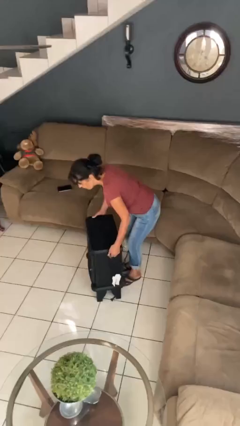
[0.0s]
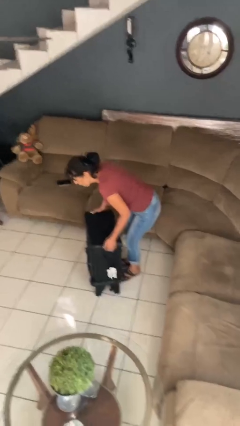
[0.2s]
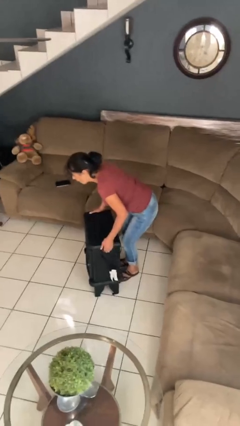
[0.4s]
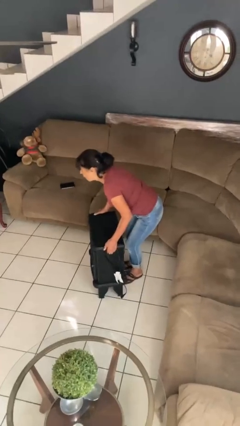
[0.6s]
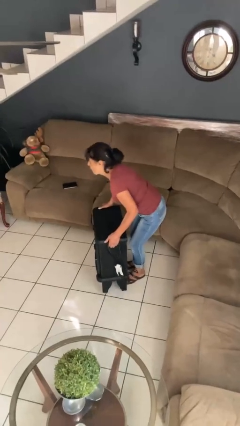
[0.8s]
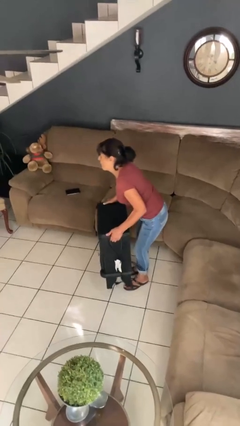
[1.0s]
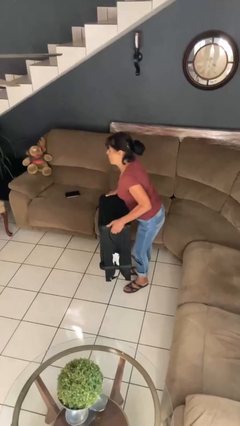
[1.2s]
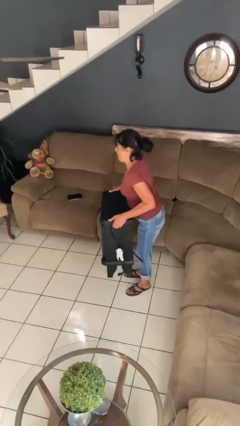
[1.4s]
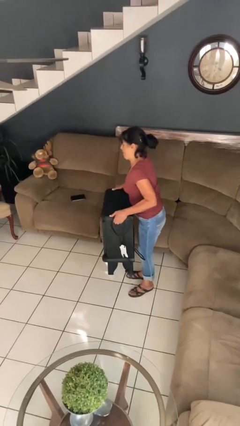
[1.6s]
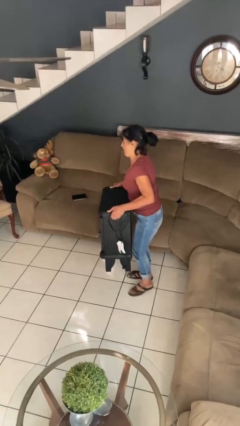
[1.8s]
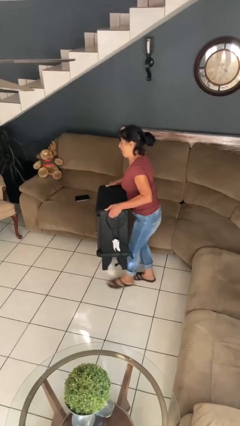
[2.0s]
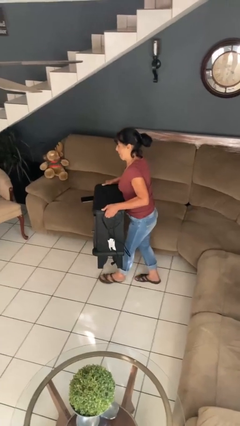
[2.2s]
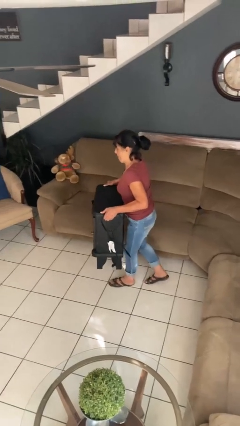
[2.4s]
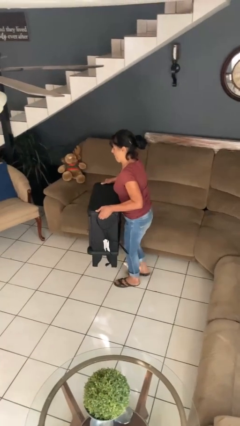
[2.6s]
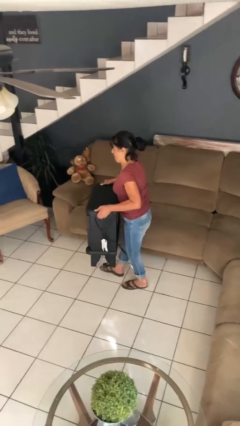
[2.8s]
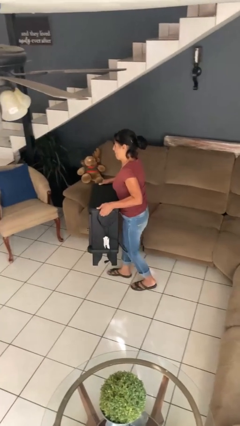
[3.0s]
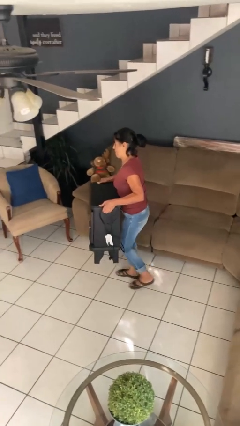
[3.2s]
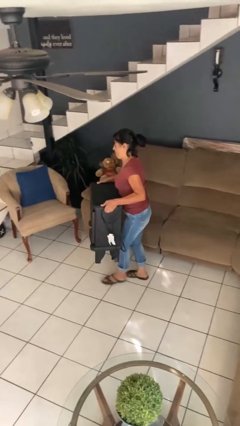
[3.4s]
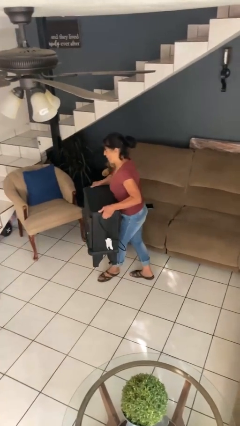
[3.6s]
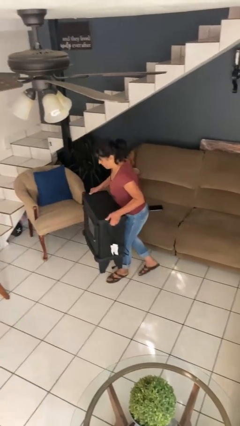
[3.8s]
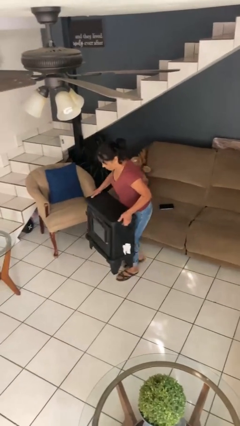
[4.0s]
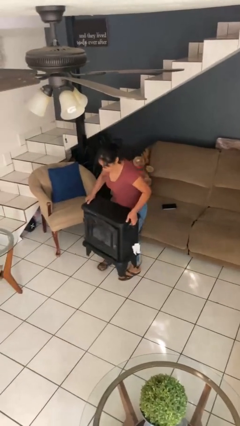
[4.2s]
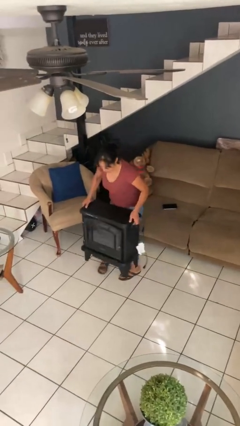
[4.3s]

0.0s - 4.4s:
person carries furniture

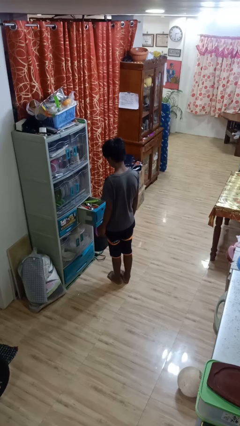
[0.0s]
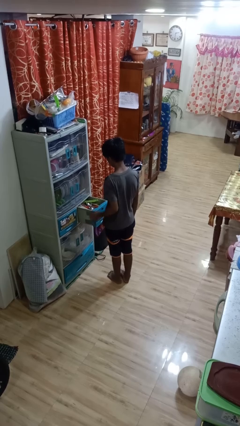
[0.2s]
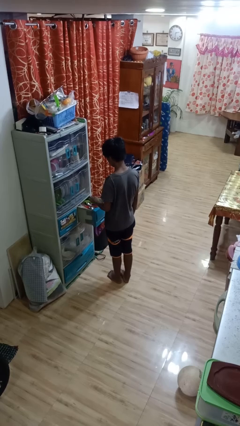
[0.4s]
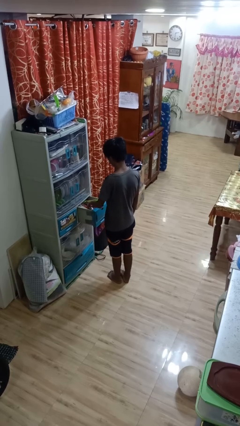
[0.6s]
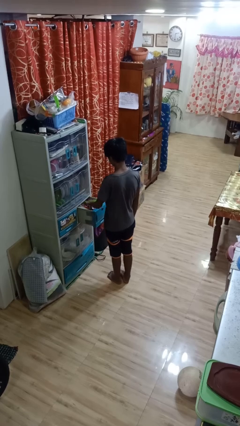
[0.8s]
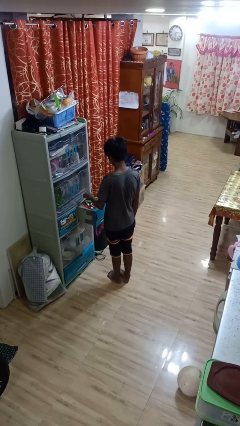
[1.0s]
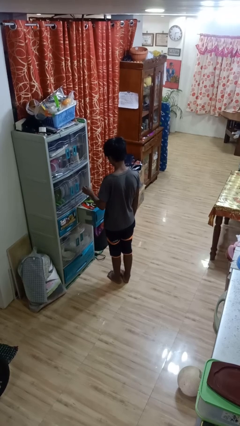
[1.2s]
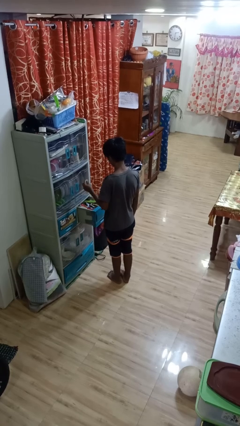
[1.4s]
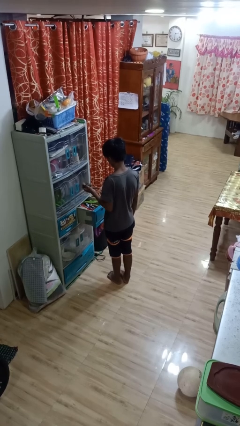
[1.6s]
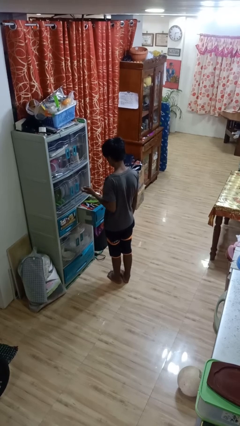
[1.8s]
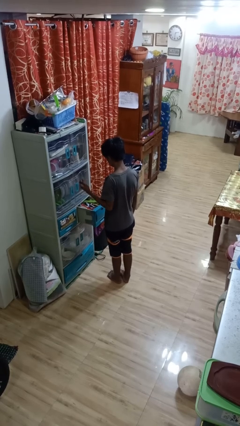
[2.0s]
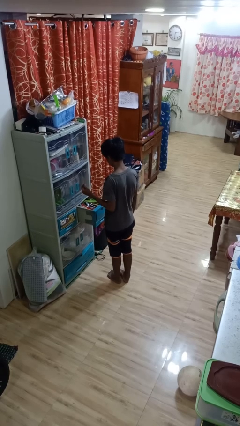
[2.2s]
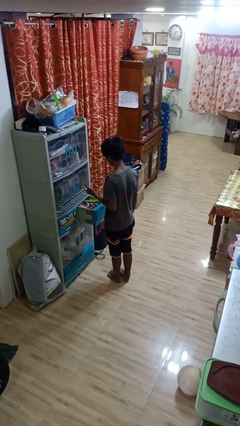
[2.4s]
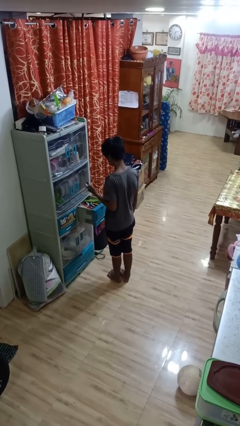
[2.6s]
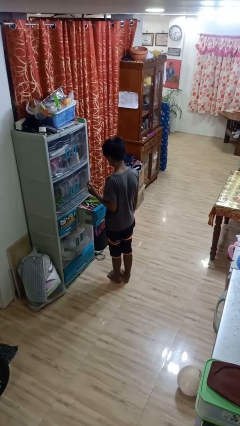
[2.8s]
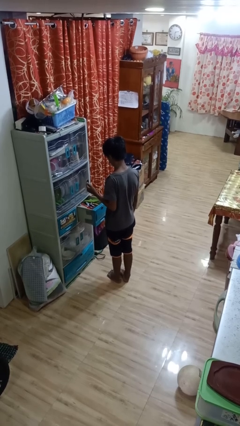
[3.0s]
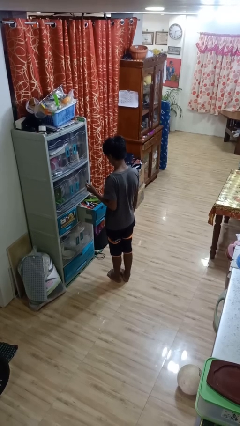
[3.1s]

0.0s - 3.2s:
person takes object from kitchen drawer

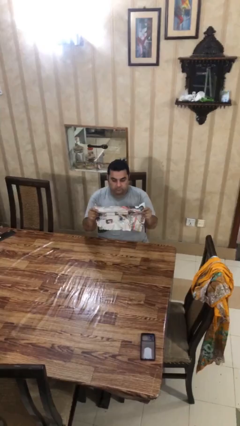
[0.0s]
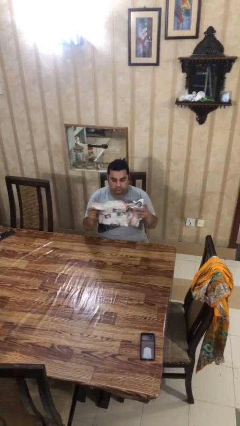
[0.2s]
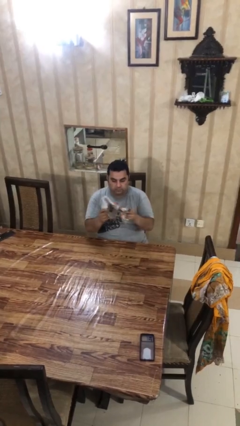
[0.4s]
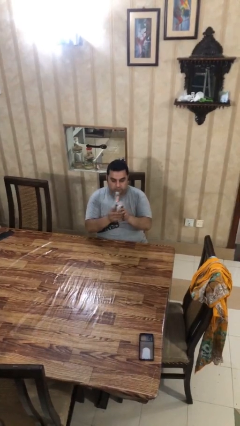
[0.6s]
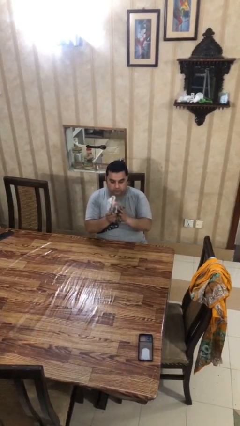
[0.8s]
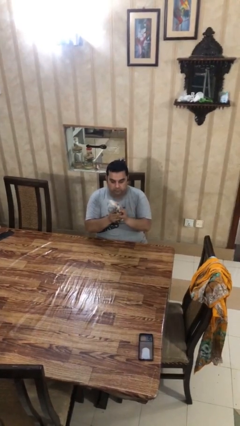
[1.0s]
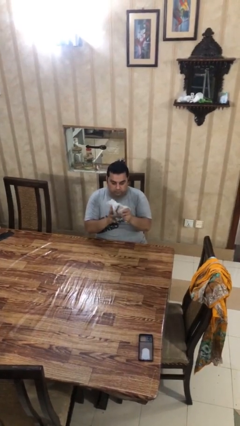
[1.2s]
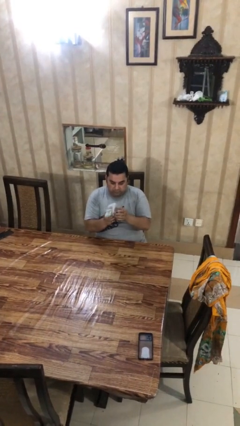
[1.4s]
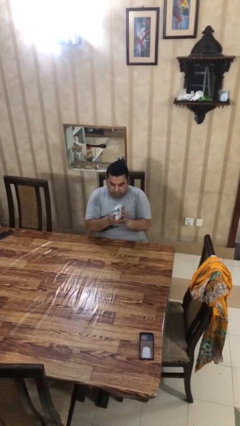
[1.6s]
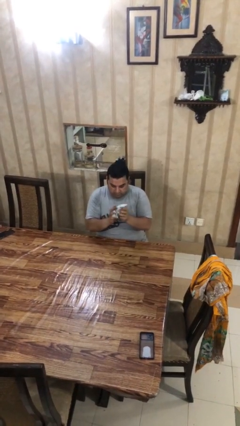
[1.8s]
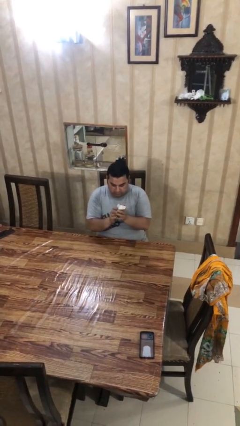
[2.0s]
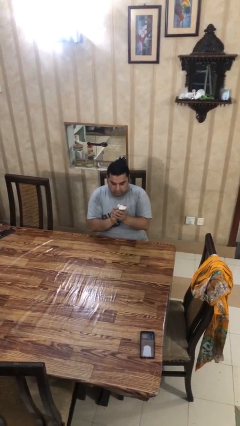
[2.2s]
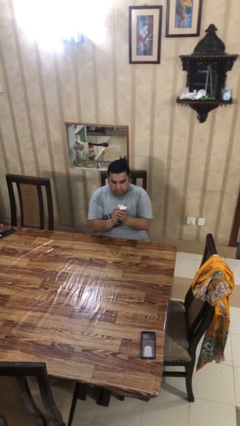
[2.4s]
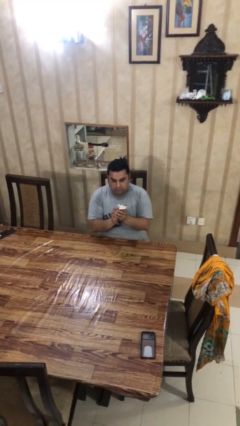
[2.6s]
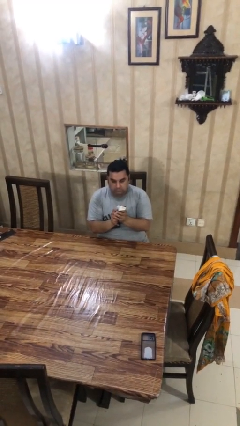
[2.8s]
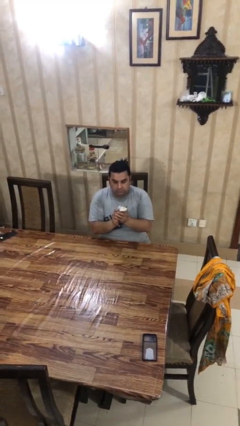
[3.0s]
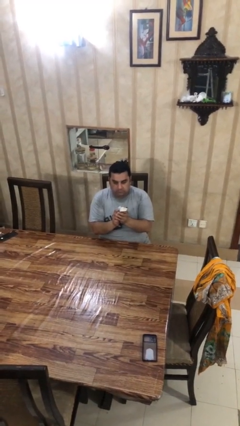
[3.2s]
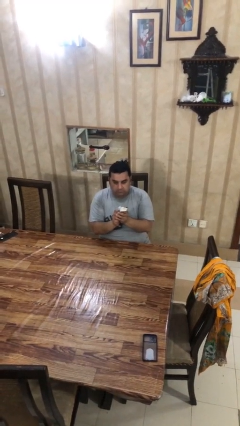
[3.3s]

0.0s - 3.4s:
person crumples paper

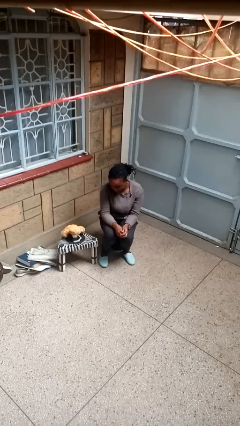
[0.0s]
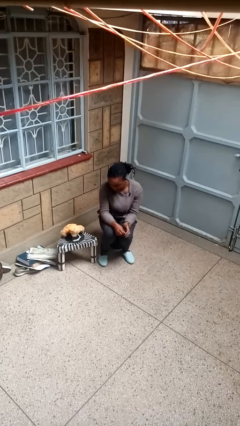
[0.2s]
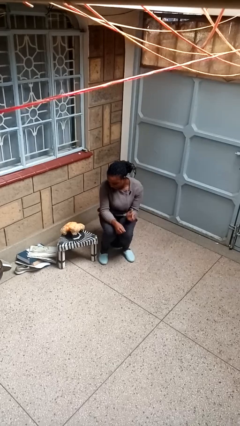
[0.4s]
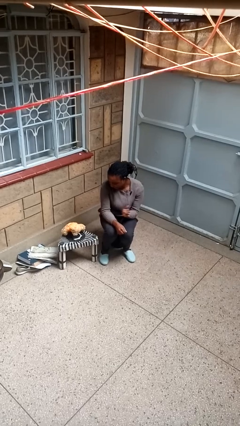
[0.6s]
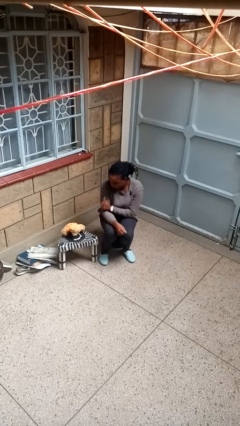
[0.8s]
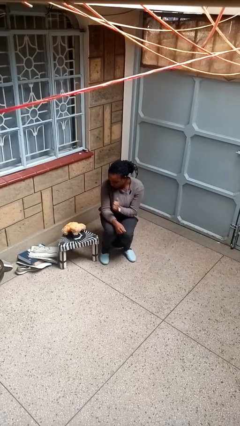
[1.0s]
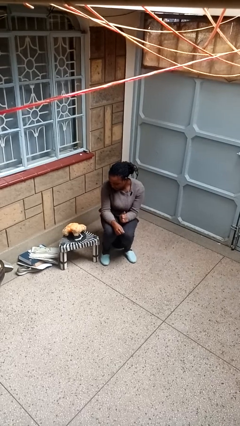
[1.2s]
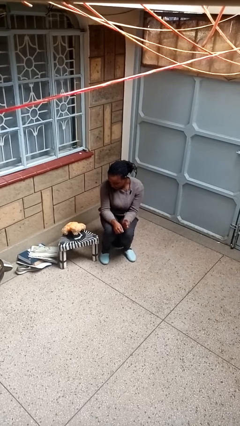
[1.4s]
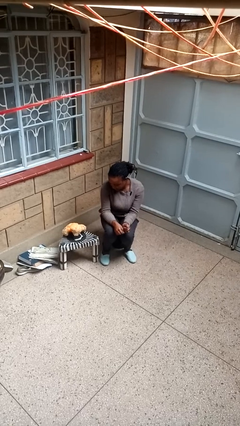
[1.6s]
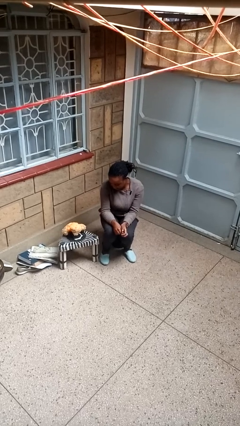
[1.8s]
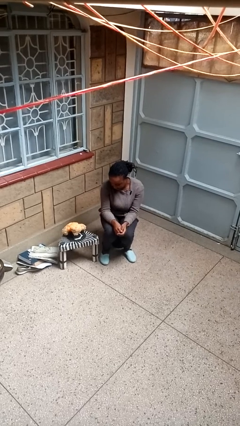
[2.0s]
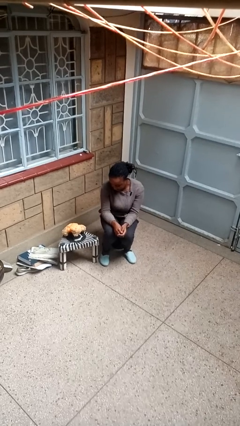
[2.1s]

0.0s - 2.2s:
person swats bug

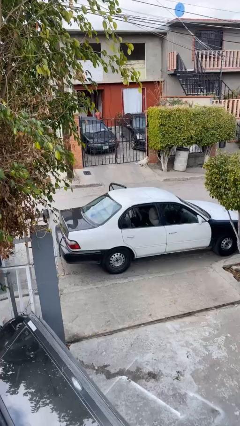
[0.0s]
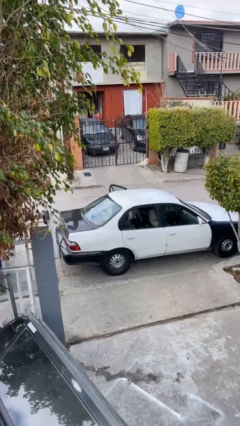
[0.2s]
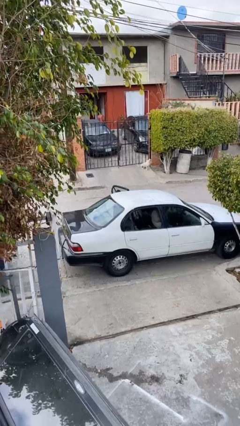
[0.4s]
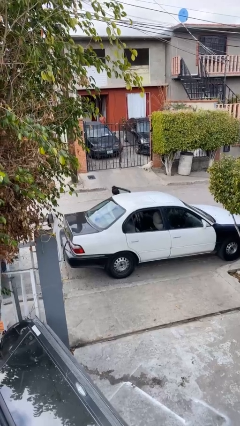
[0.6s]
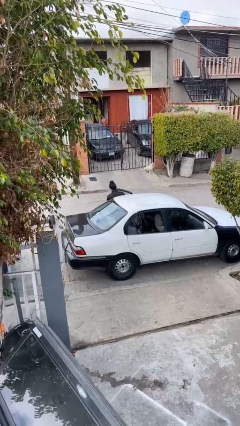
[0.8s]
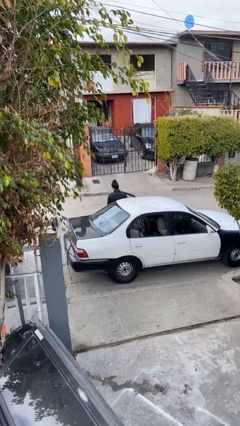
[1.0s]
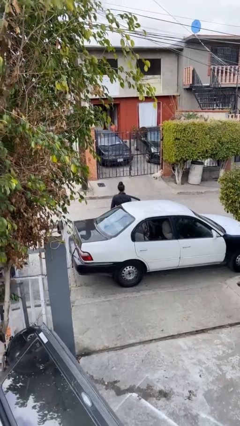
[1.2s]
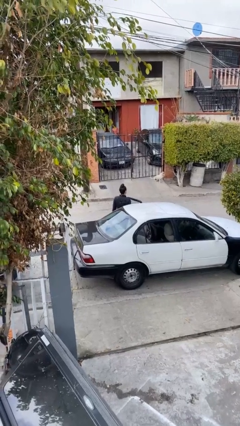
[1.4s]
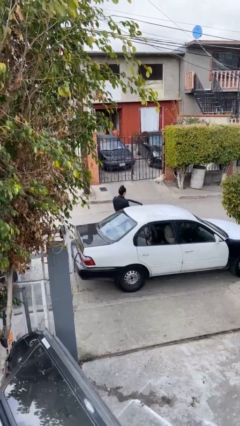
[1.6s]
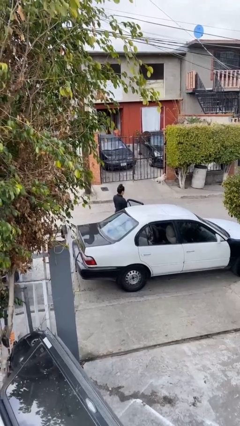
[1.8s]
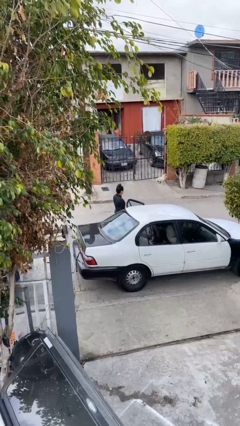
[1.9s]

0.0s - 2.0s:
person exits car

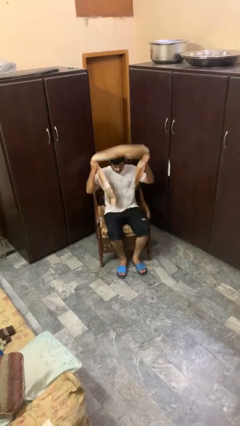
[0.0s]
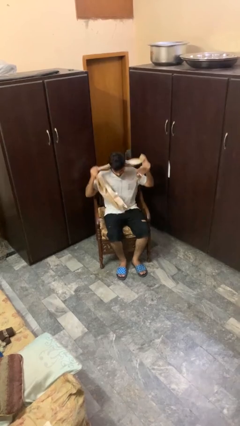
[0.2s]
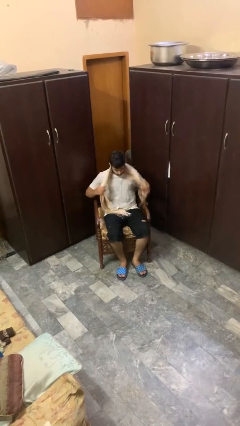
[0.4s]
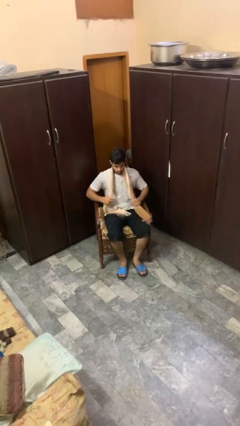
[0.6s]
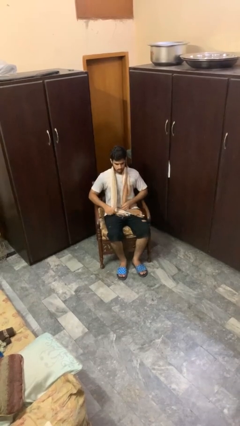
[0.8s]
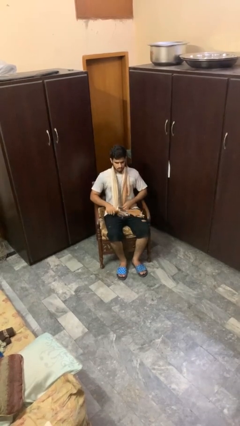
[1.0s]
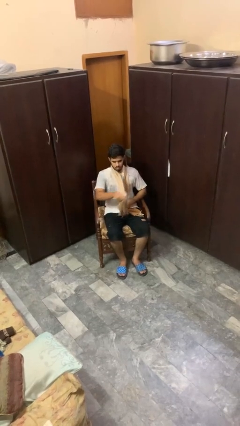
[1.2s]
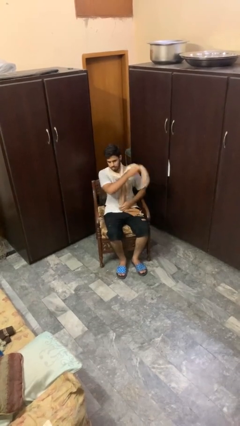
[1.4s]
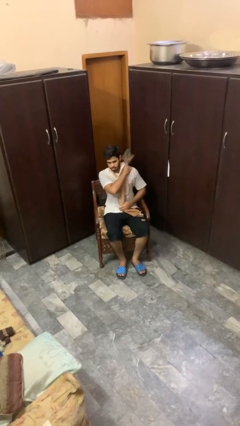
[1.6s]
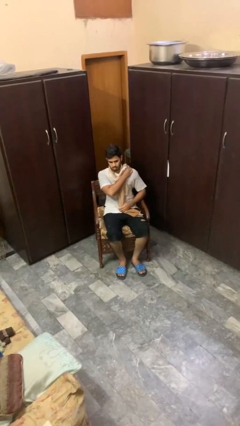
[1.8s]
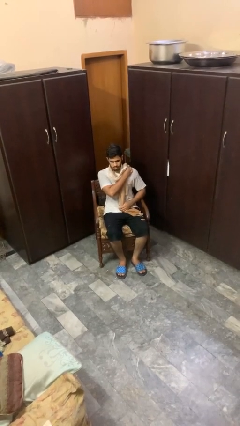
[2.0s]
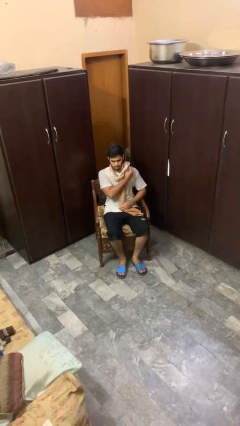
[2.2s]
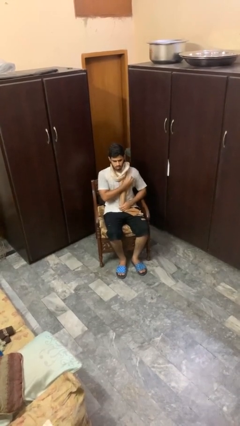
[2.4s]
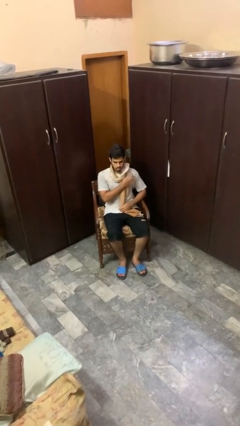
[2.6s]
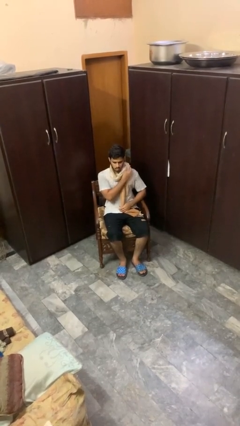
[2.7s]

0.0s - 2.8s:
person puts on scarf
